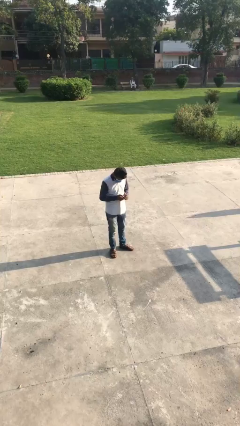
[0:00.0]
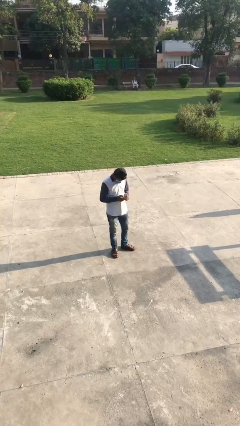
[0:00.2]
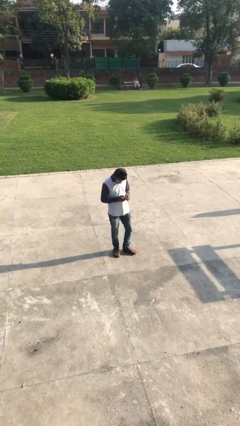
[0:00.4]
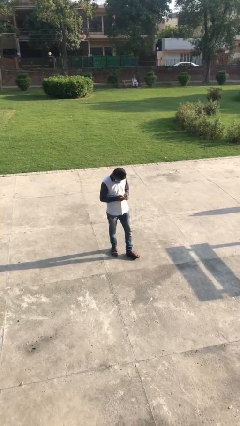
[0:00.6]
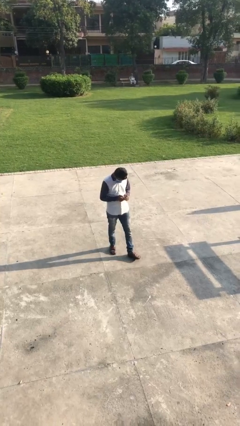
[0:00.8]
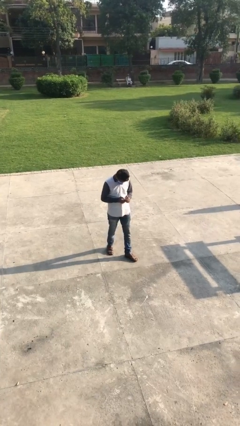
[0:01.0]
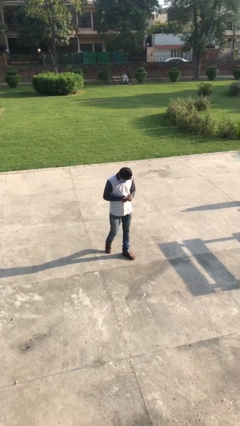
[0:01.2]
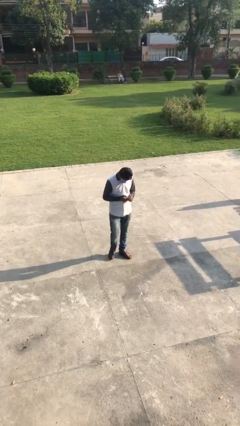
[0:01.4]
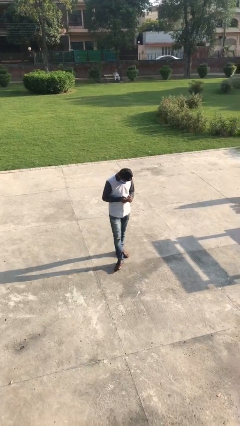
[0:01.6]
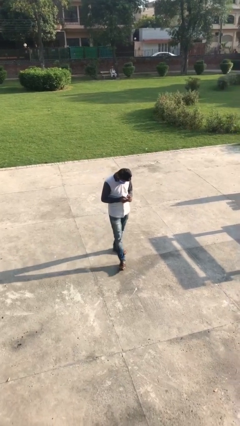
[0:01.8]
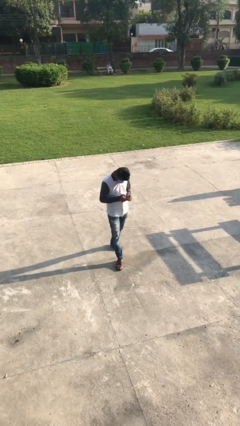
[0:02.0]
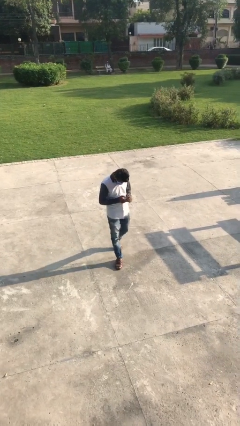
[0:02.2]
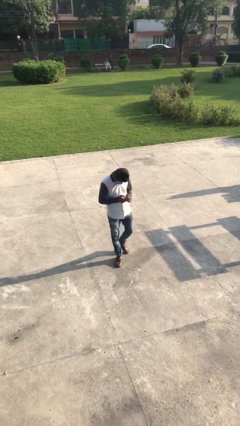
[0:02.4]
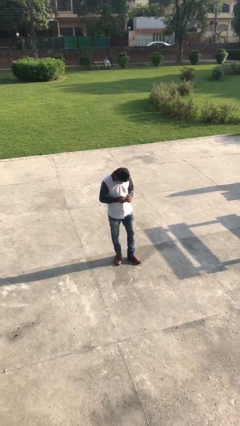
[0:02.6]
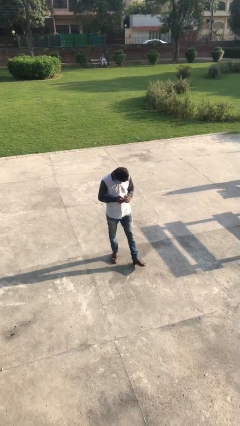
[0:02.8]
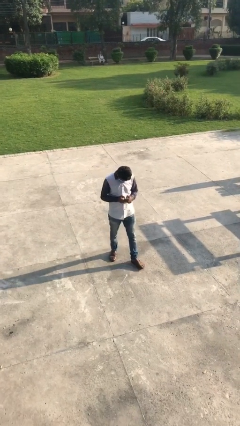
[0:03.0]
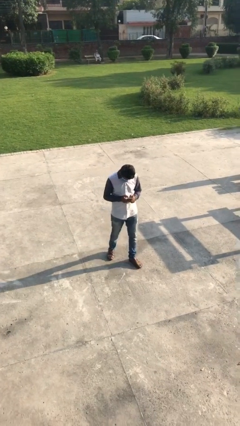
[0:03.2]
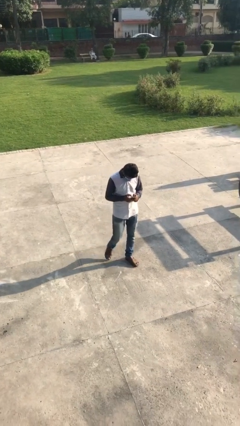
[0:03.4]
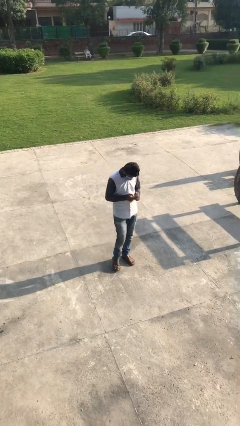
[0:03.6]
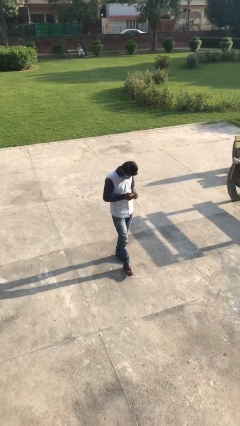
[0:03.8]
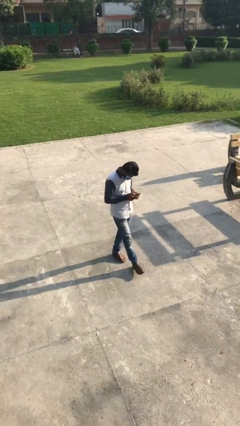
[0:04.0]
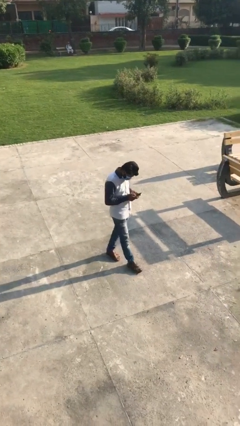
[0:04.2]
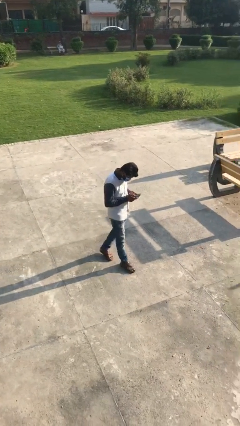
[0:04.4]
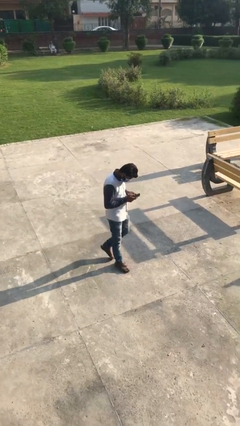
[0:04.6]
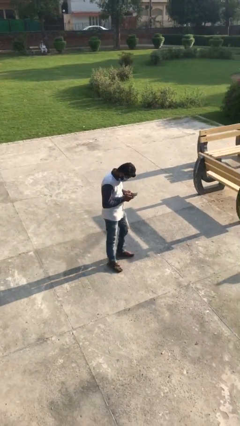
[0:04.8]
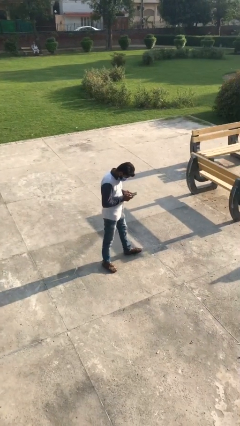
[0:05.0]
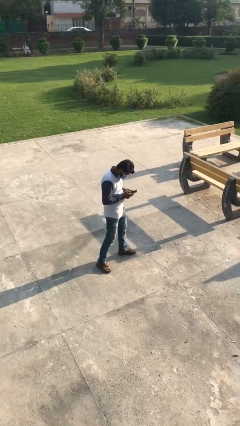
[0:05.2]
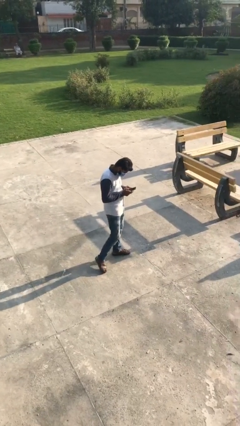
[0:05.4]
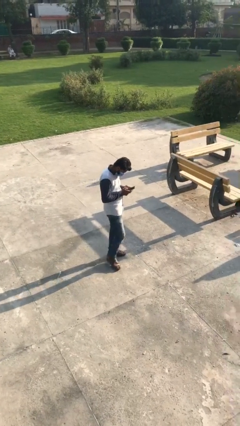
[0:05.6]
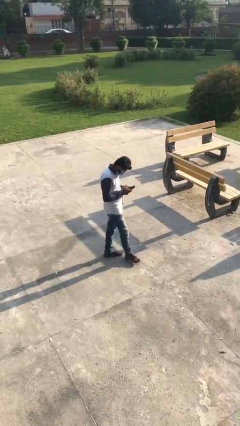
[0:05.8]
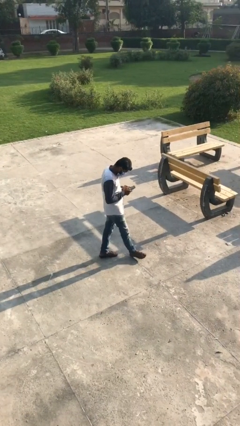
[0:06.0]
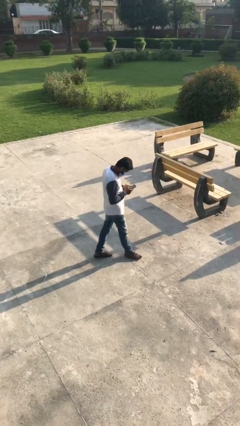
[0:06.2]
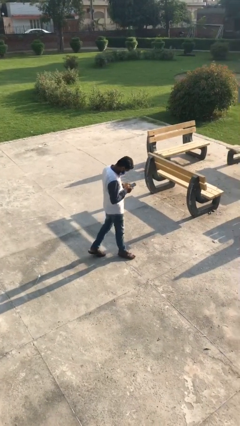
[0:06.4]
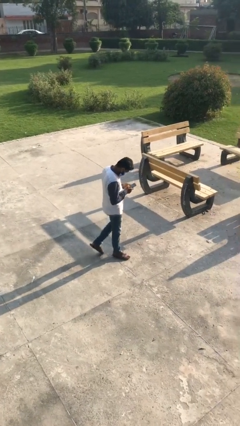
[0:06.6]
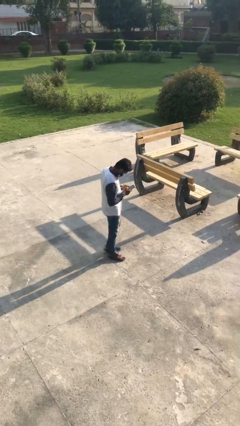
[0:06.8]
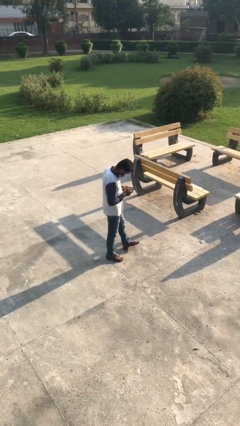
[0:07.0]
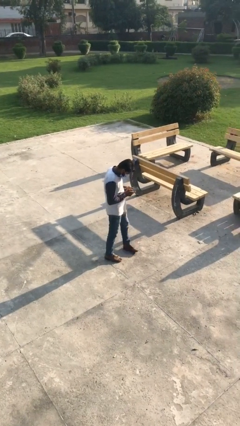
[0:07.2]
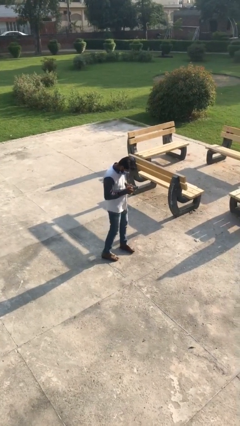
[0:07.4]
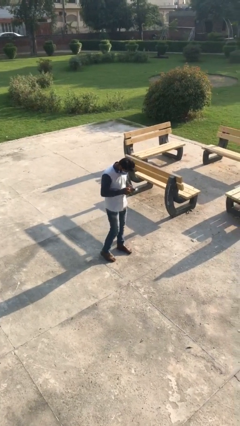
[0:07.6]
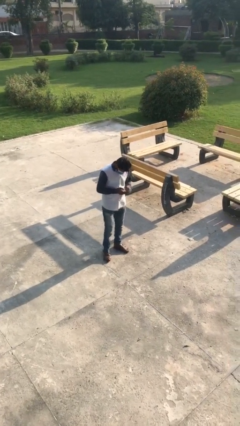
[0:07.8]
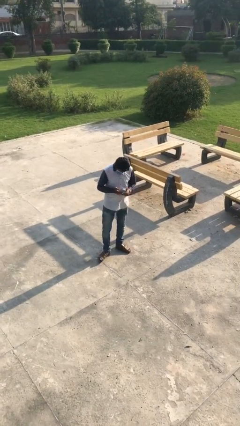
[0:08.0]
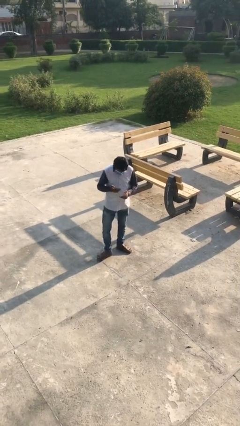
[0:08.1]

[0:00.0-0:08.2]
person texts on phone

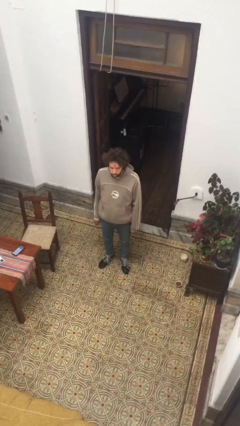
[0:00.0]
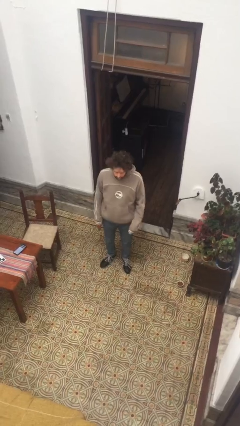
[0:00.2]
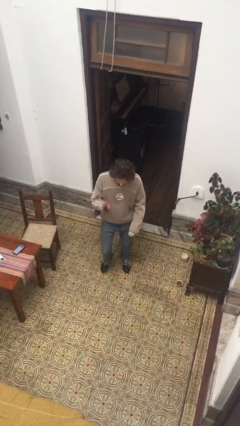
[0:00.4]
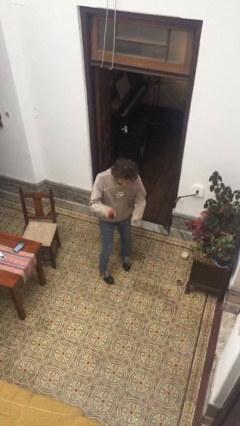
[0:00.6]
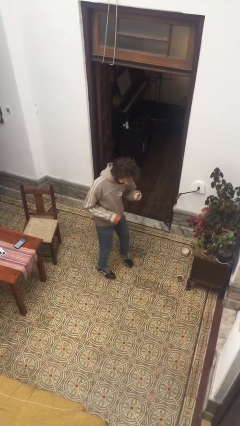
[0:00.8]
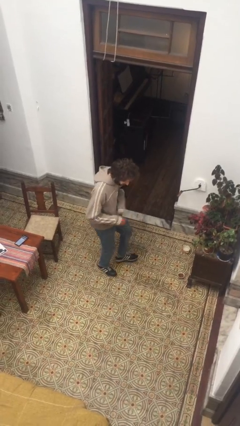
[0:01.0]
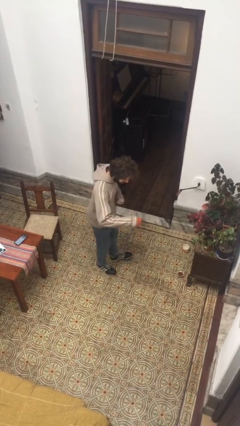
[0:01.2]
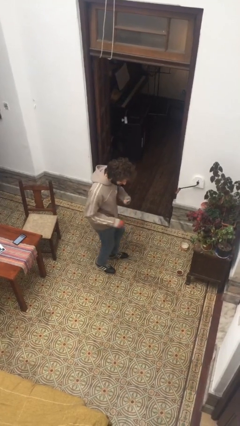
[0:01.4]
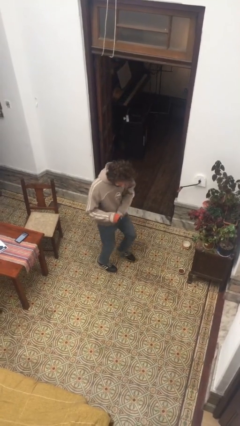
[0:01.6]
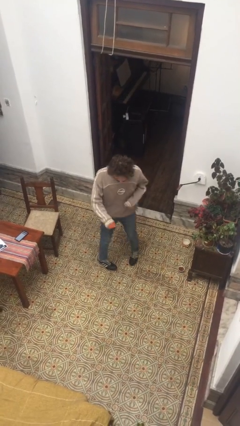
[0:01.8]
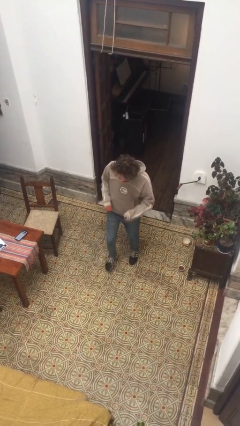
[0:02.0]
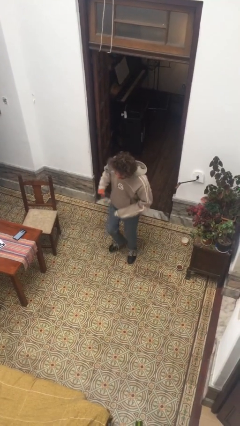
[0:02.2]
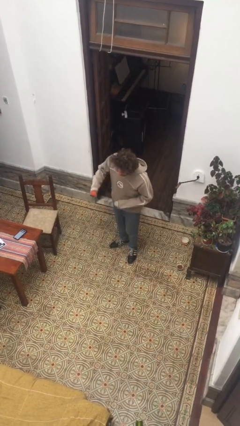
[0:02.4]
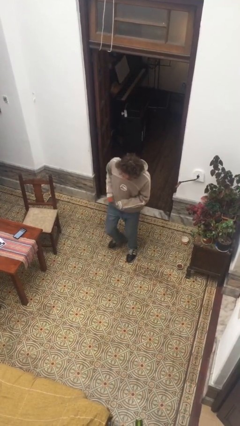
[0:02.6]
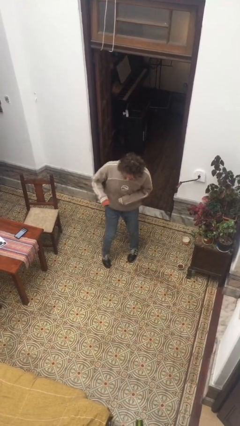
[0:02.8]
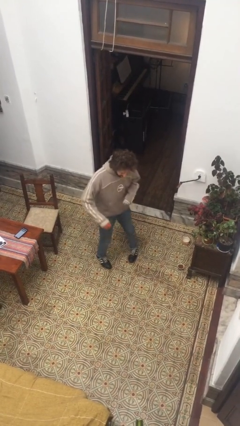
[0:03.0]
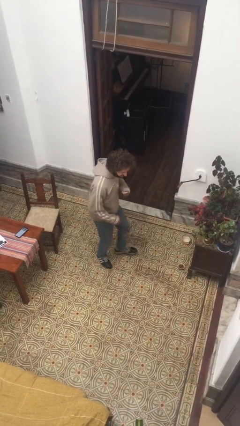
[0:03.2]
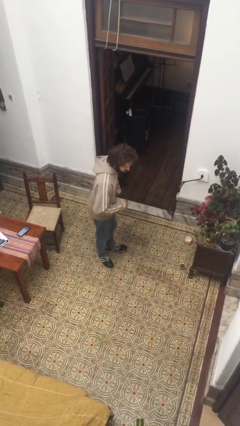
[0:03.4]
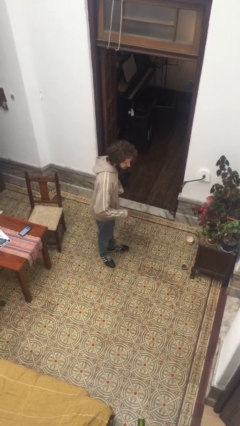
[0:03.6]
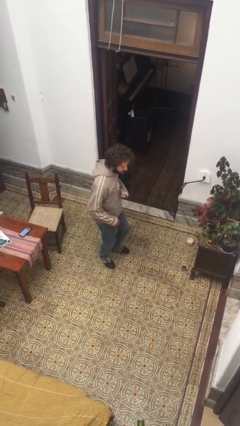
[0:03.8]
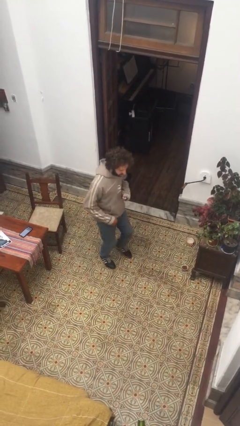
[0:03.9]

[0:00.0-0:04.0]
person dances in place

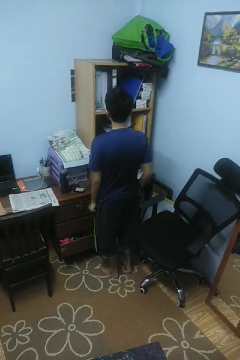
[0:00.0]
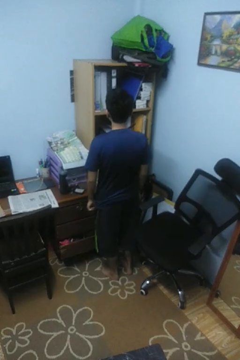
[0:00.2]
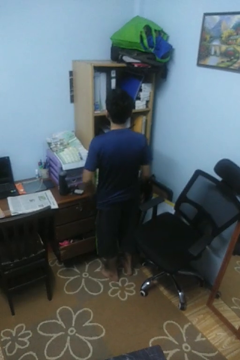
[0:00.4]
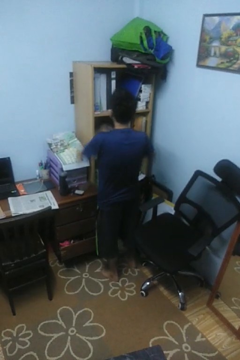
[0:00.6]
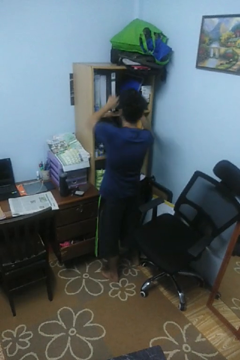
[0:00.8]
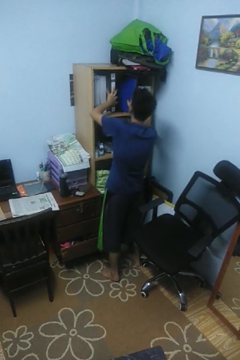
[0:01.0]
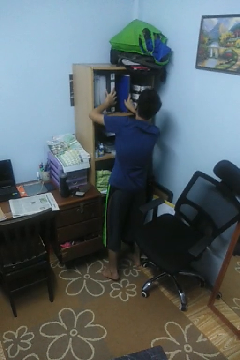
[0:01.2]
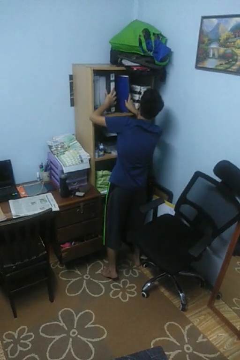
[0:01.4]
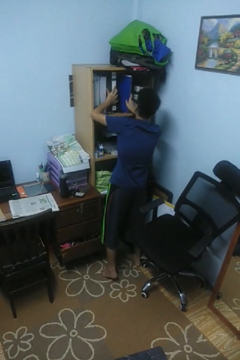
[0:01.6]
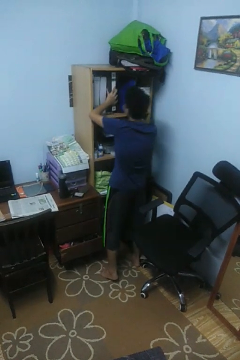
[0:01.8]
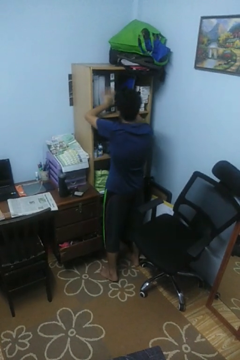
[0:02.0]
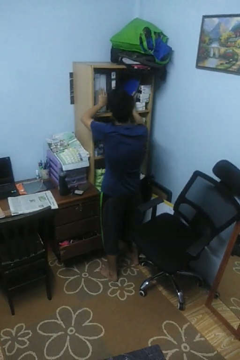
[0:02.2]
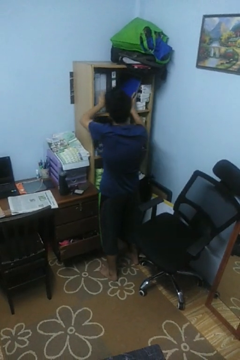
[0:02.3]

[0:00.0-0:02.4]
person searches in cabinet

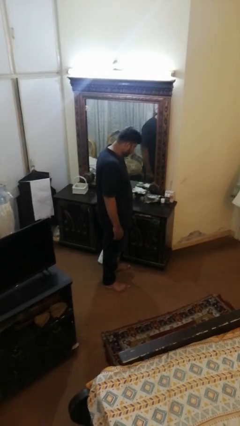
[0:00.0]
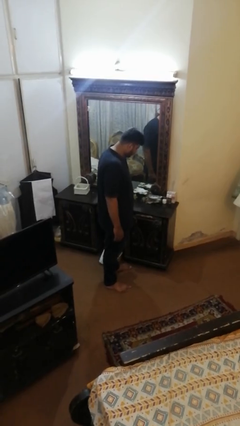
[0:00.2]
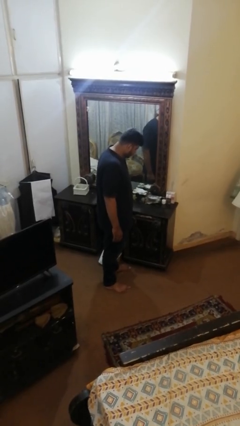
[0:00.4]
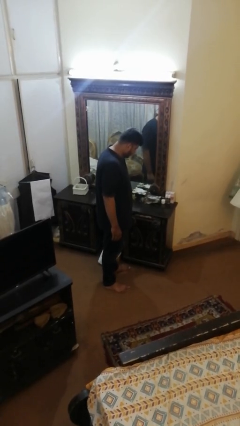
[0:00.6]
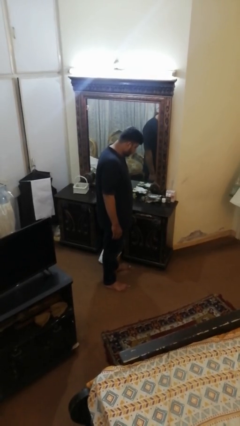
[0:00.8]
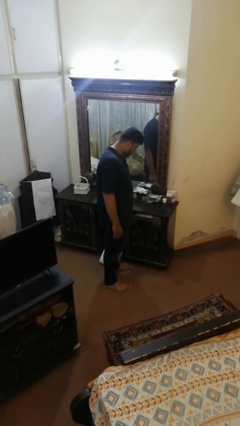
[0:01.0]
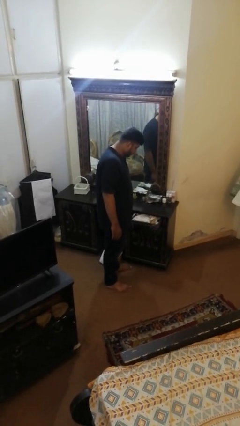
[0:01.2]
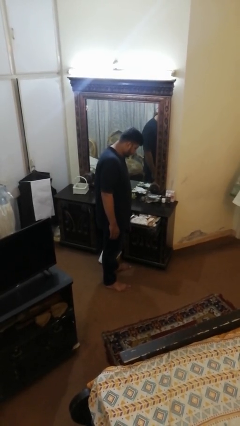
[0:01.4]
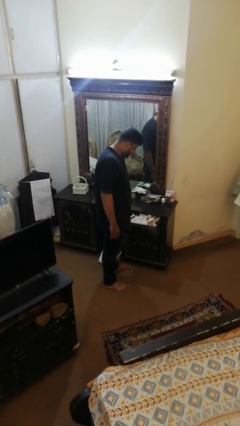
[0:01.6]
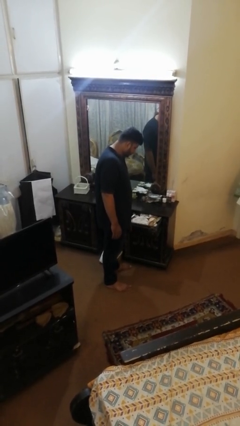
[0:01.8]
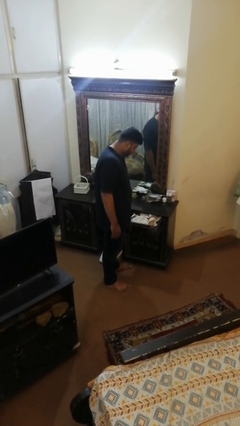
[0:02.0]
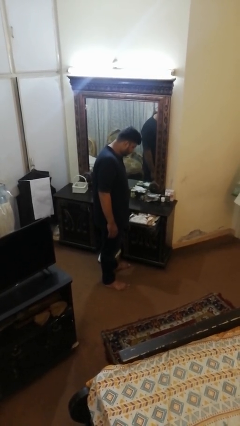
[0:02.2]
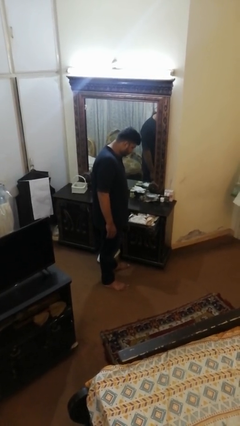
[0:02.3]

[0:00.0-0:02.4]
person opens dresser drawer

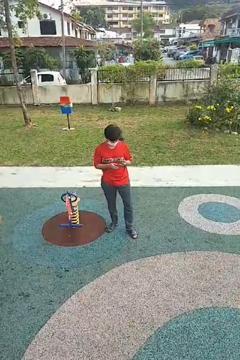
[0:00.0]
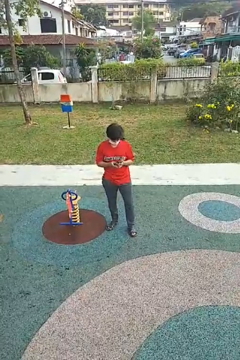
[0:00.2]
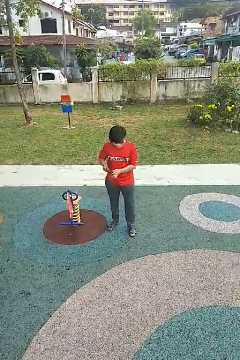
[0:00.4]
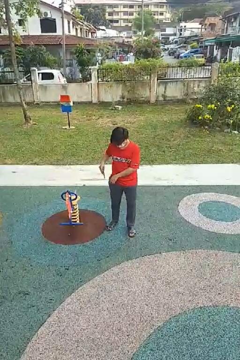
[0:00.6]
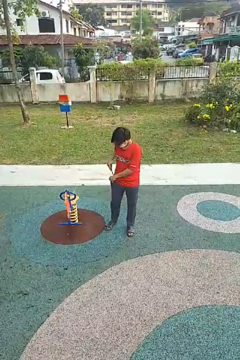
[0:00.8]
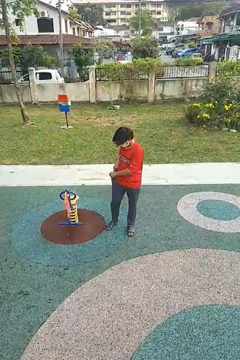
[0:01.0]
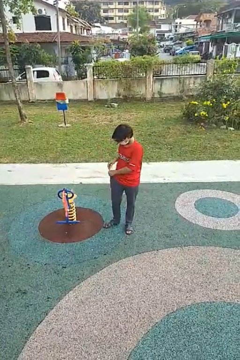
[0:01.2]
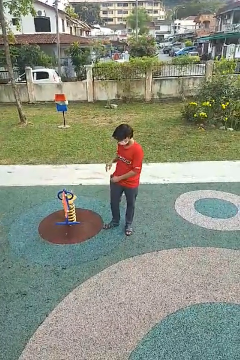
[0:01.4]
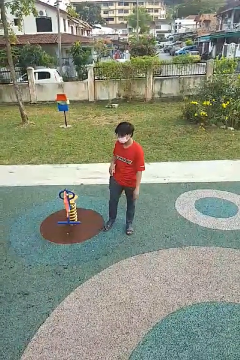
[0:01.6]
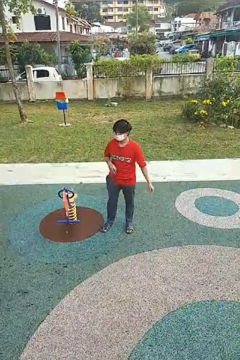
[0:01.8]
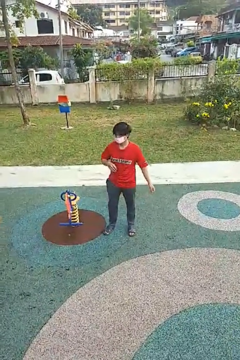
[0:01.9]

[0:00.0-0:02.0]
person puts phone into pocket
